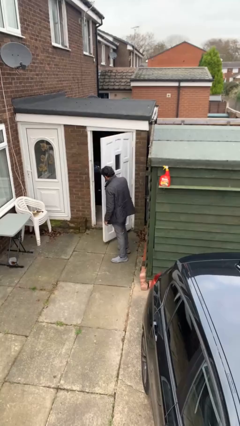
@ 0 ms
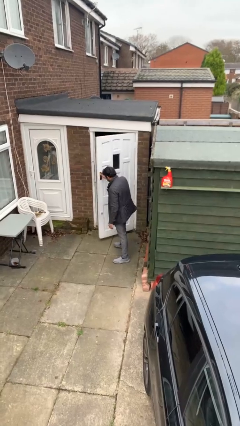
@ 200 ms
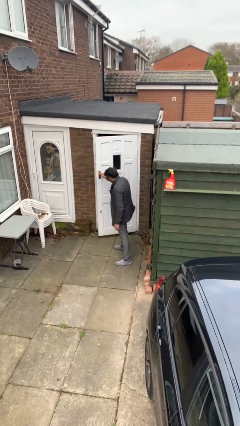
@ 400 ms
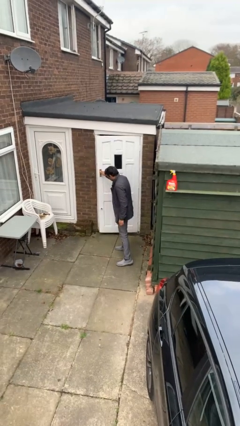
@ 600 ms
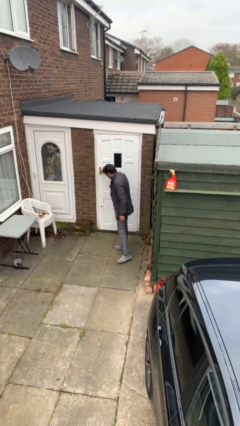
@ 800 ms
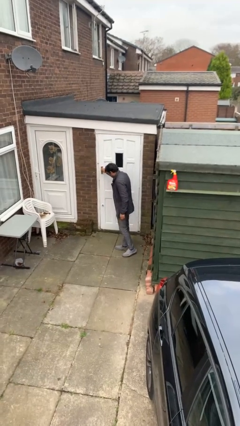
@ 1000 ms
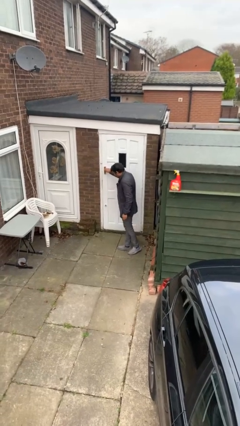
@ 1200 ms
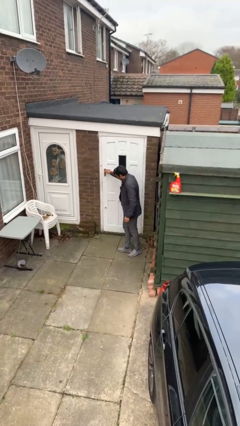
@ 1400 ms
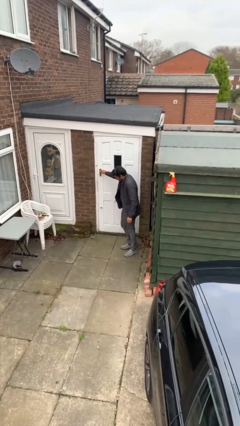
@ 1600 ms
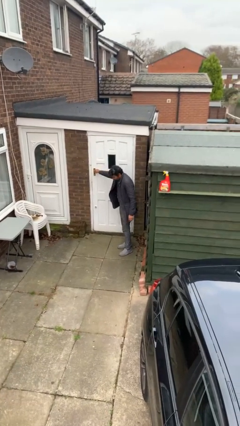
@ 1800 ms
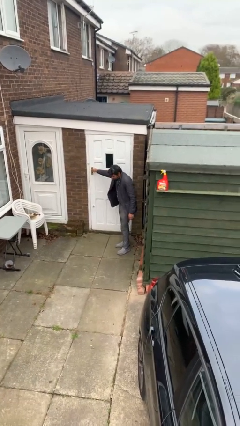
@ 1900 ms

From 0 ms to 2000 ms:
person closes facility door

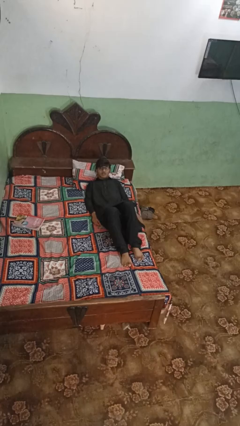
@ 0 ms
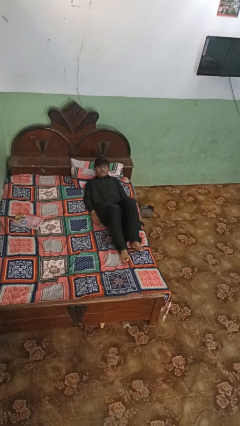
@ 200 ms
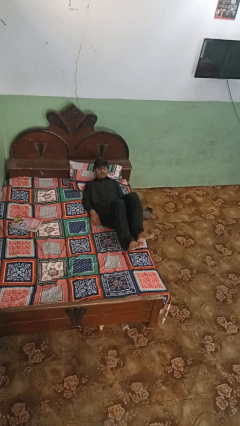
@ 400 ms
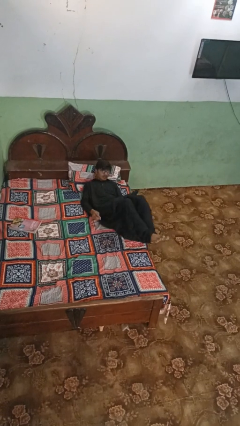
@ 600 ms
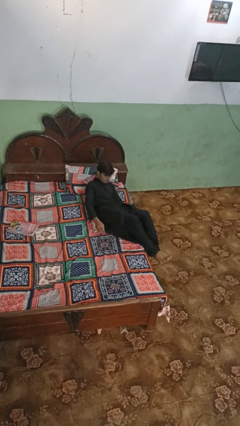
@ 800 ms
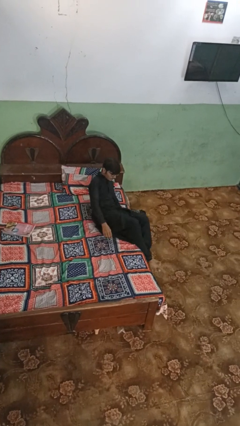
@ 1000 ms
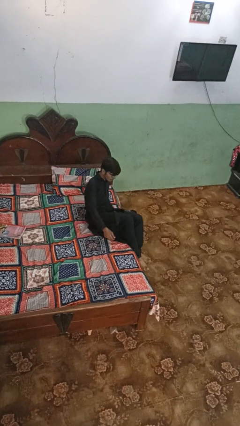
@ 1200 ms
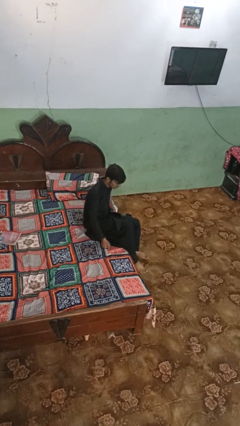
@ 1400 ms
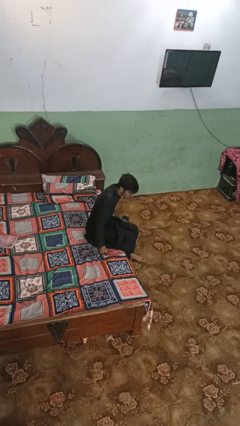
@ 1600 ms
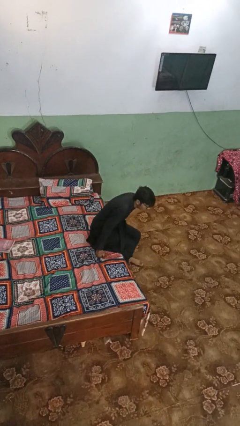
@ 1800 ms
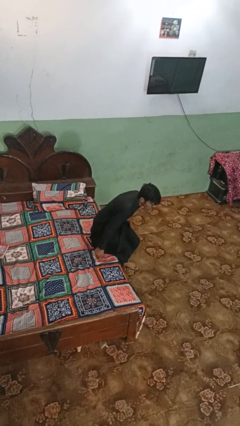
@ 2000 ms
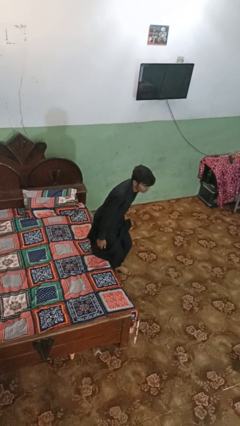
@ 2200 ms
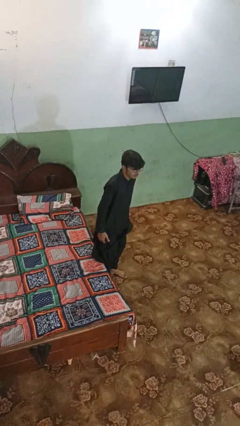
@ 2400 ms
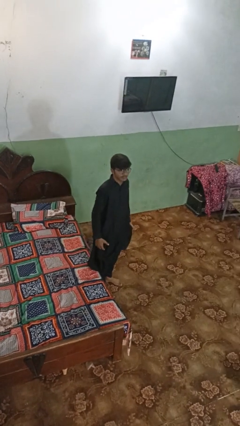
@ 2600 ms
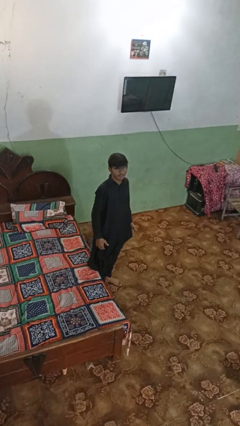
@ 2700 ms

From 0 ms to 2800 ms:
person stands up

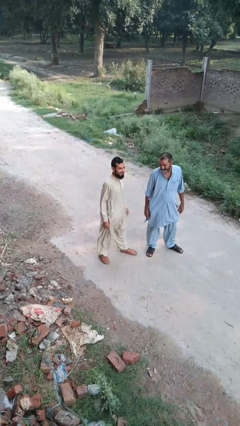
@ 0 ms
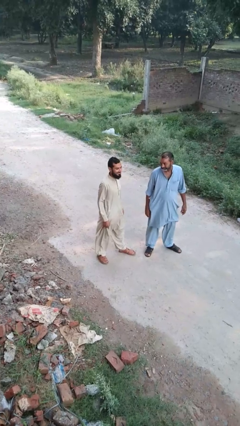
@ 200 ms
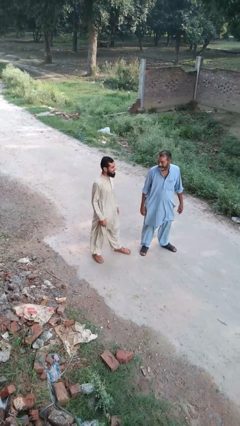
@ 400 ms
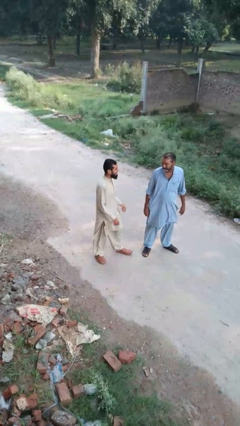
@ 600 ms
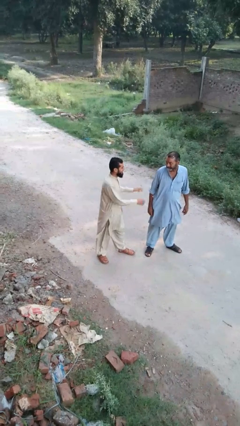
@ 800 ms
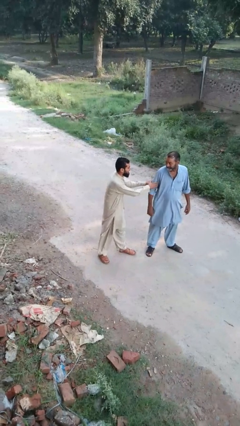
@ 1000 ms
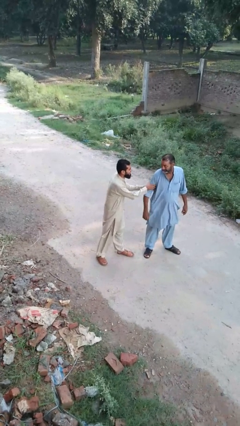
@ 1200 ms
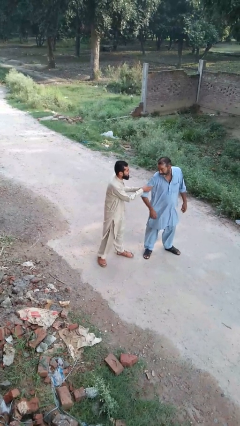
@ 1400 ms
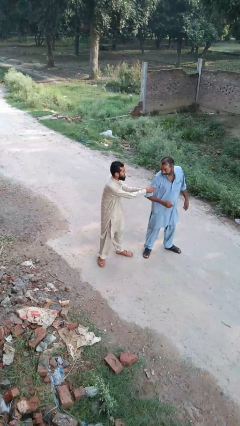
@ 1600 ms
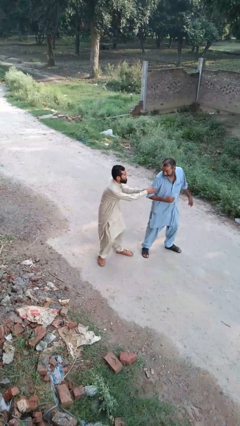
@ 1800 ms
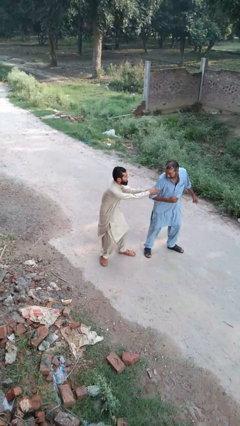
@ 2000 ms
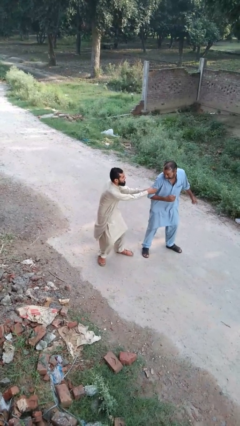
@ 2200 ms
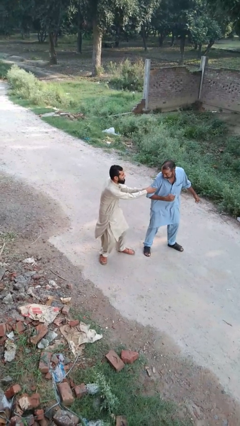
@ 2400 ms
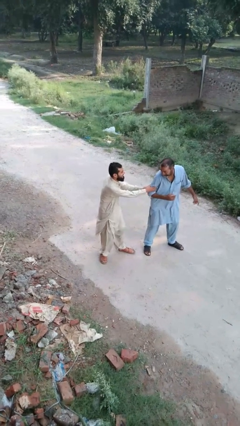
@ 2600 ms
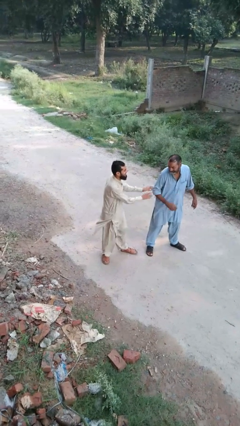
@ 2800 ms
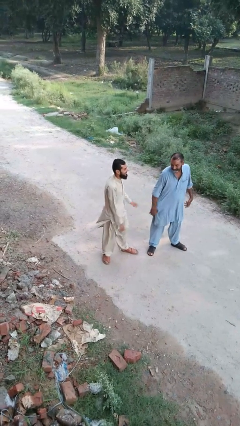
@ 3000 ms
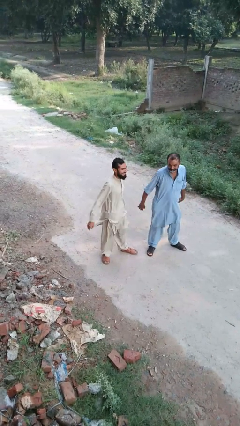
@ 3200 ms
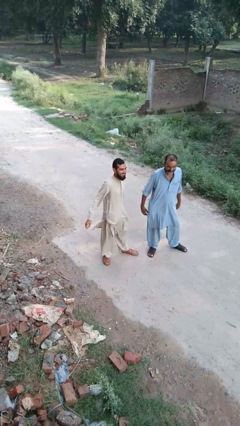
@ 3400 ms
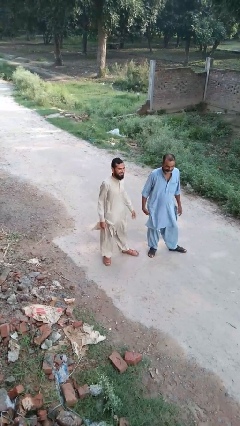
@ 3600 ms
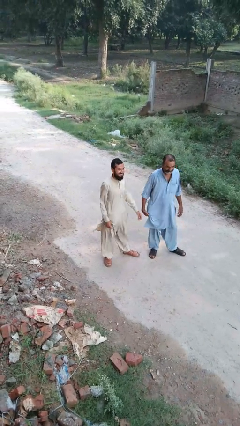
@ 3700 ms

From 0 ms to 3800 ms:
person grabs person by forearm

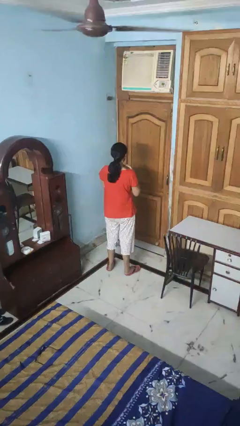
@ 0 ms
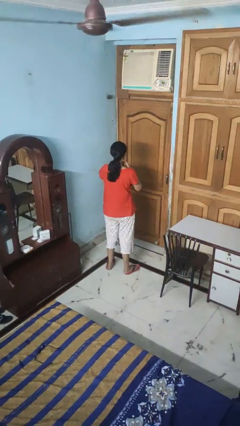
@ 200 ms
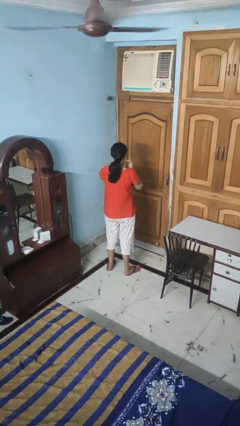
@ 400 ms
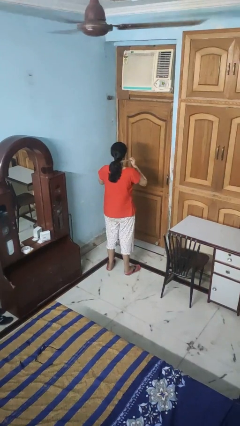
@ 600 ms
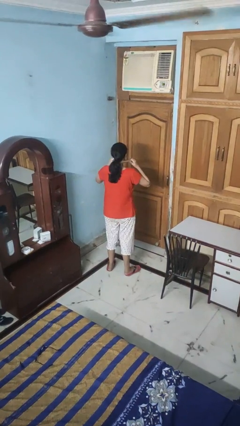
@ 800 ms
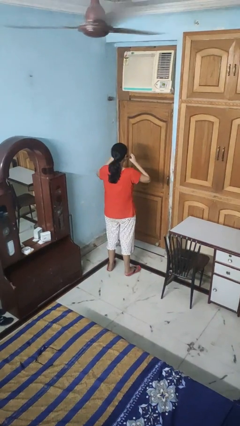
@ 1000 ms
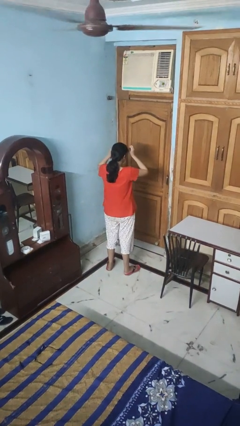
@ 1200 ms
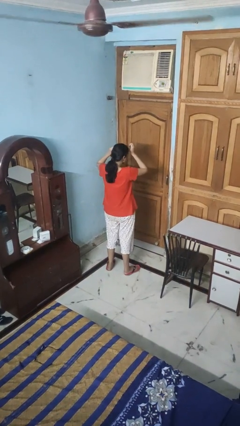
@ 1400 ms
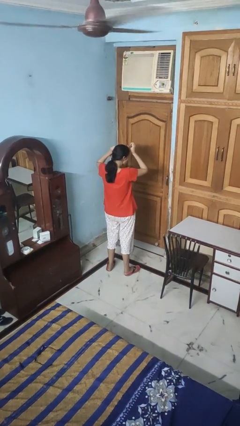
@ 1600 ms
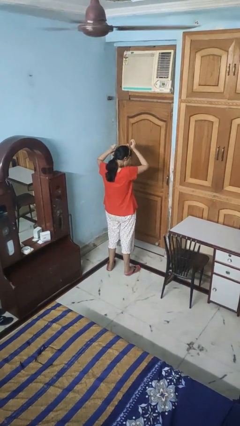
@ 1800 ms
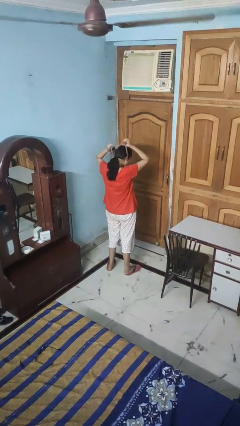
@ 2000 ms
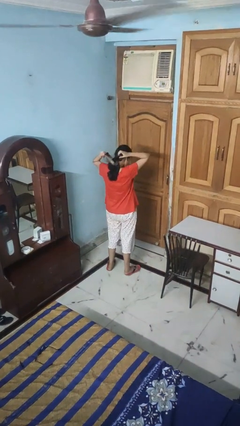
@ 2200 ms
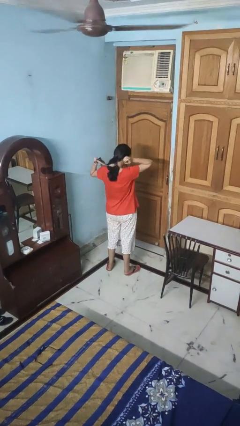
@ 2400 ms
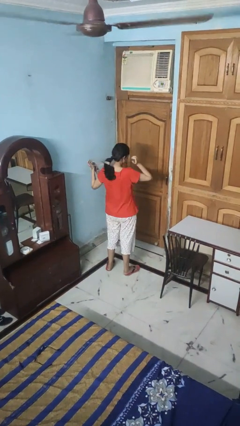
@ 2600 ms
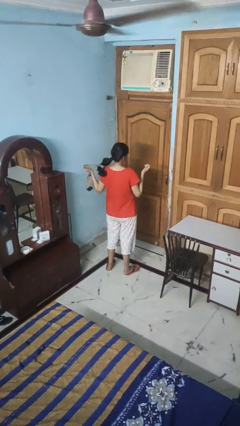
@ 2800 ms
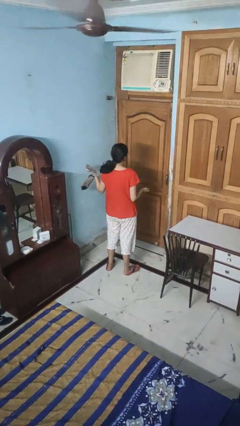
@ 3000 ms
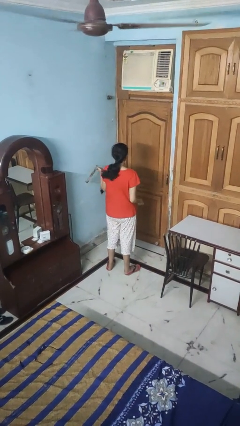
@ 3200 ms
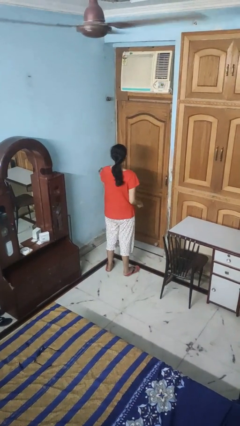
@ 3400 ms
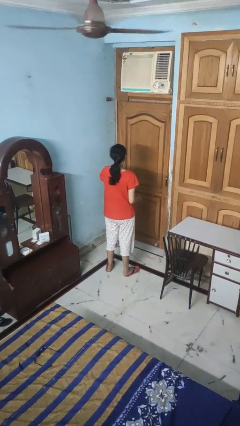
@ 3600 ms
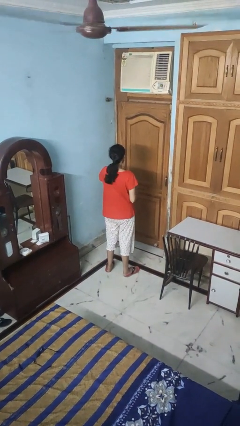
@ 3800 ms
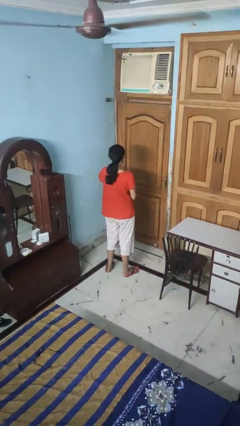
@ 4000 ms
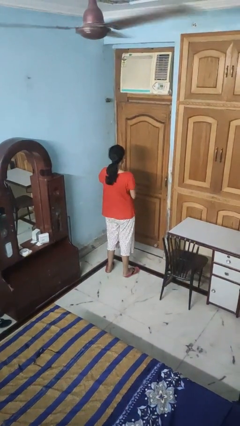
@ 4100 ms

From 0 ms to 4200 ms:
person takes off necktie

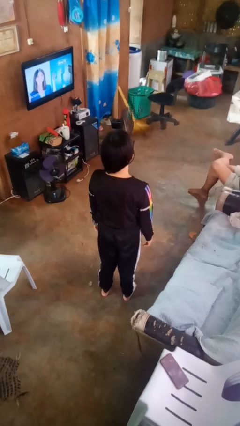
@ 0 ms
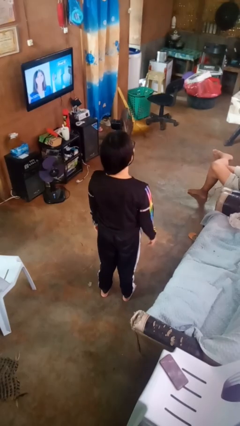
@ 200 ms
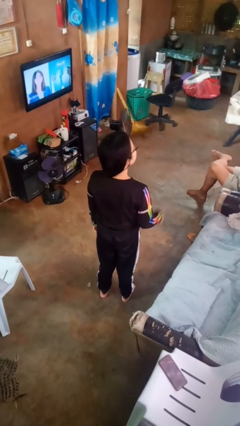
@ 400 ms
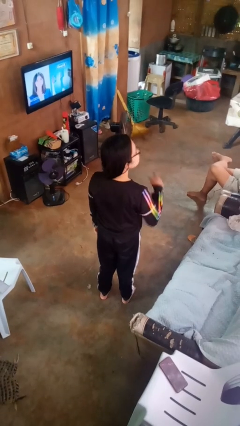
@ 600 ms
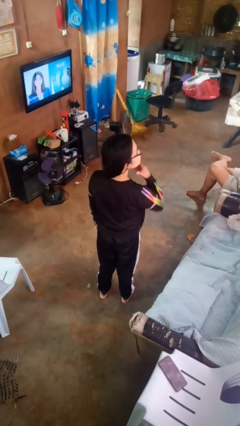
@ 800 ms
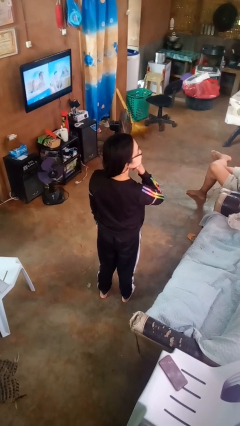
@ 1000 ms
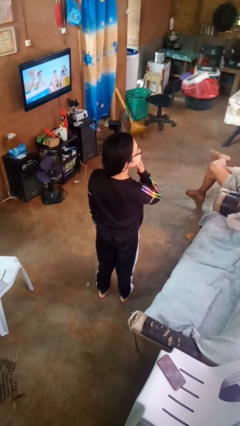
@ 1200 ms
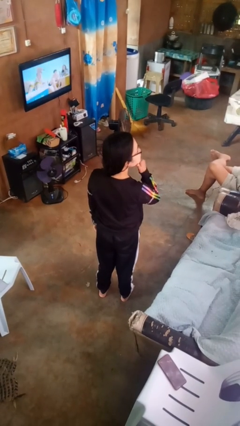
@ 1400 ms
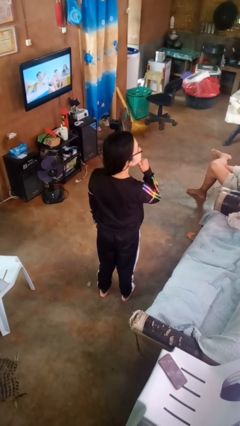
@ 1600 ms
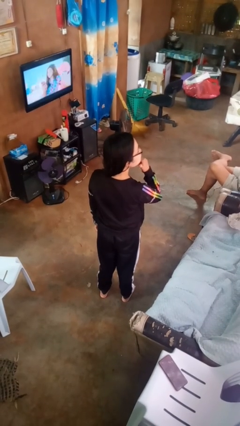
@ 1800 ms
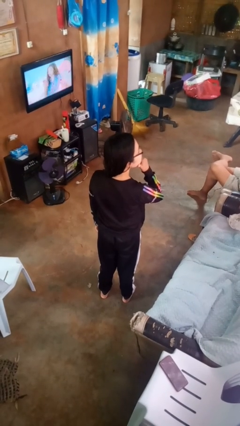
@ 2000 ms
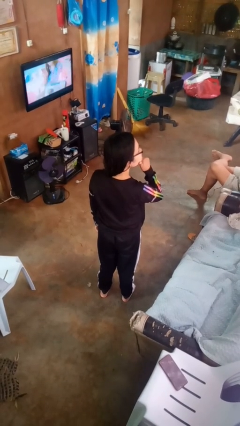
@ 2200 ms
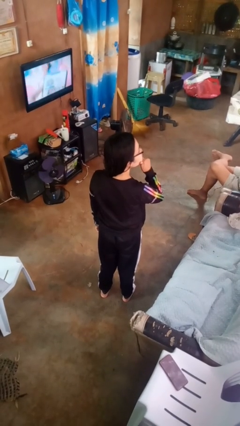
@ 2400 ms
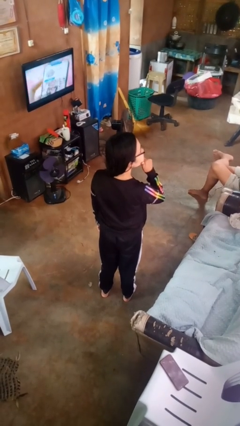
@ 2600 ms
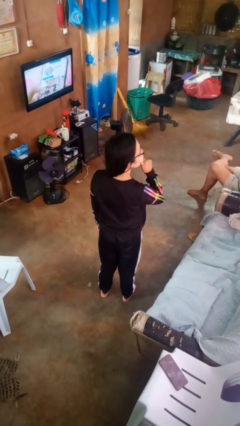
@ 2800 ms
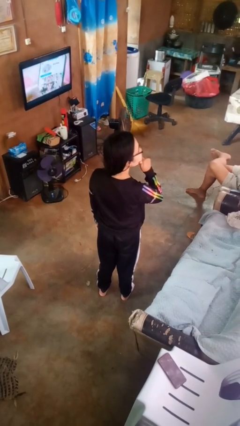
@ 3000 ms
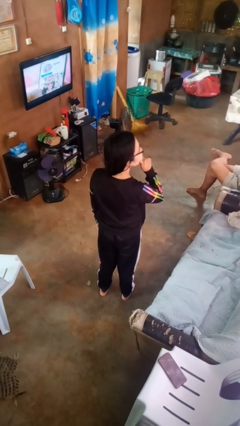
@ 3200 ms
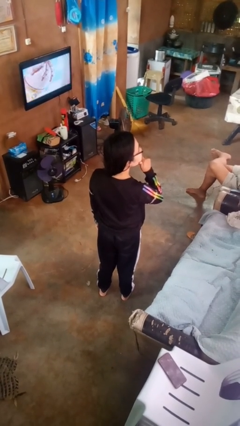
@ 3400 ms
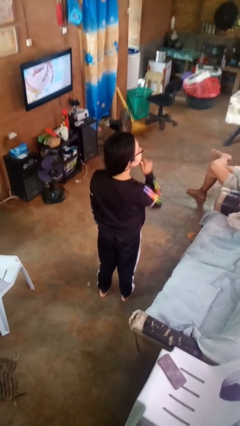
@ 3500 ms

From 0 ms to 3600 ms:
person strokes chin

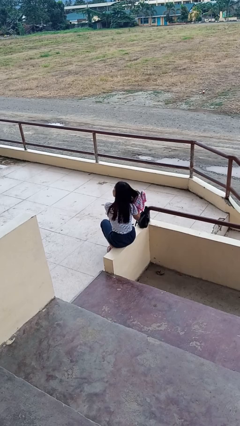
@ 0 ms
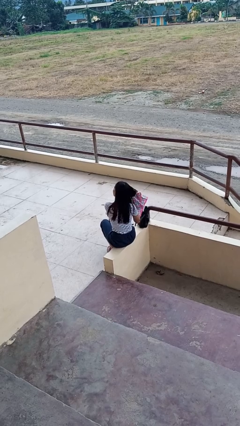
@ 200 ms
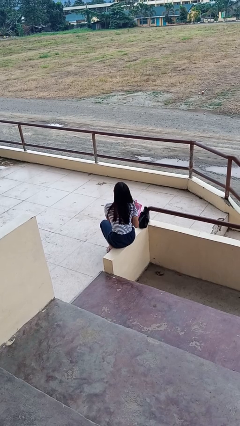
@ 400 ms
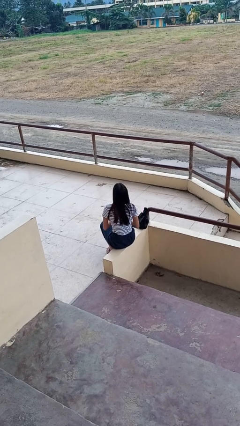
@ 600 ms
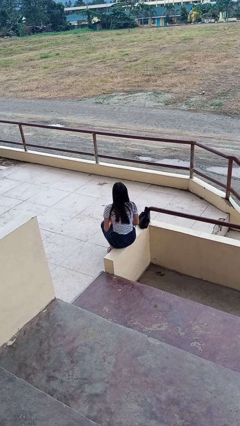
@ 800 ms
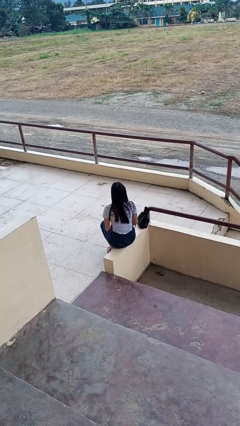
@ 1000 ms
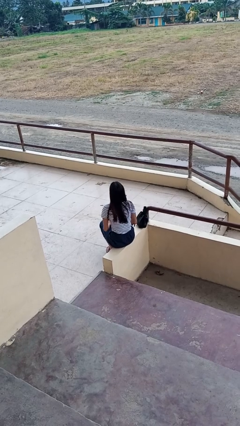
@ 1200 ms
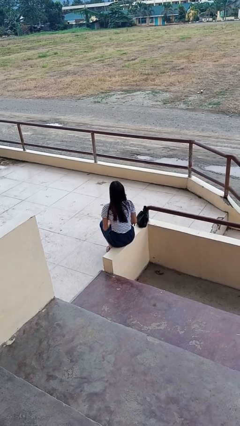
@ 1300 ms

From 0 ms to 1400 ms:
person dries hair with towel
